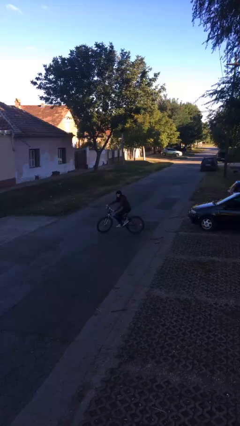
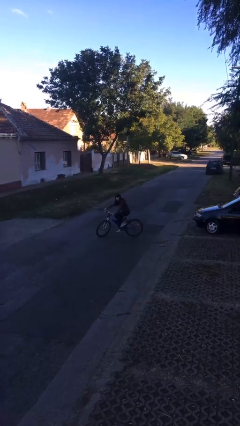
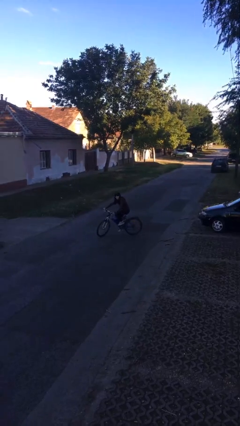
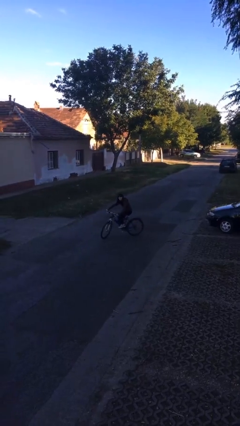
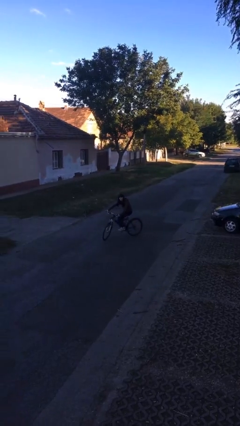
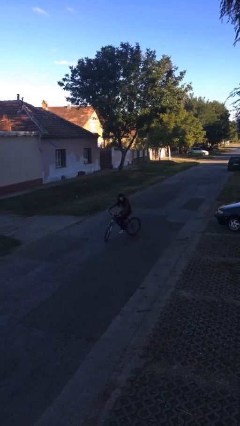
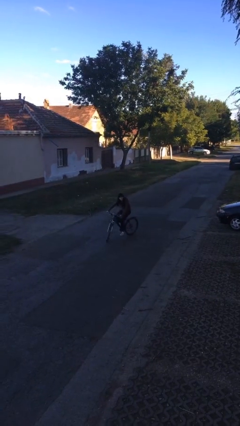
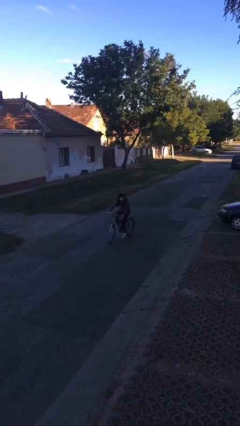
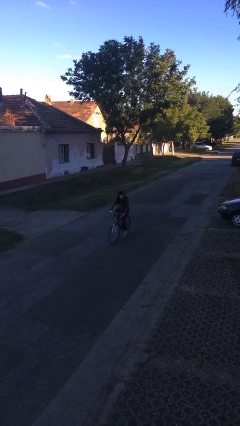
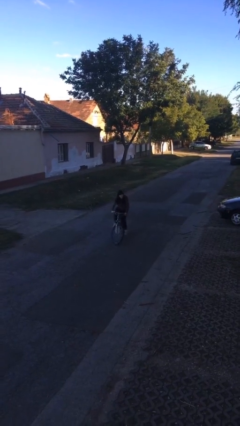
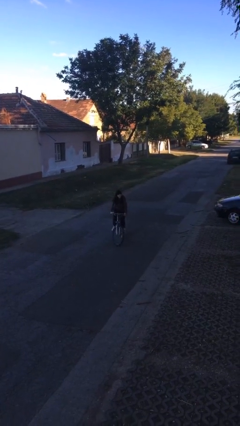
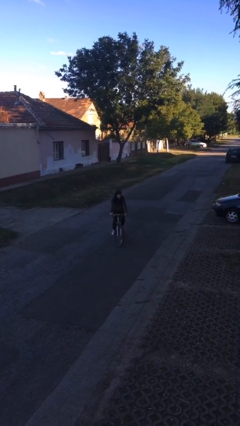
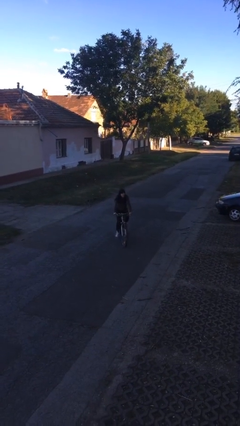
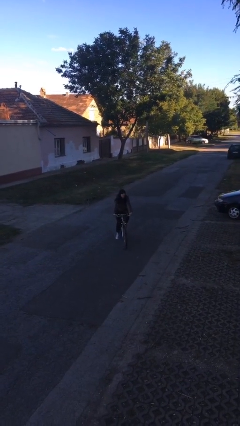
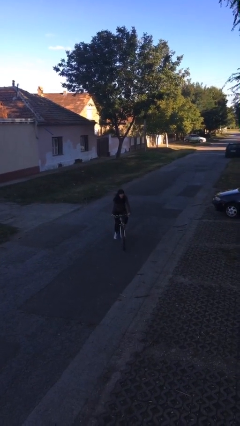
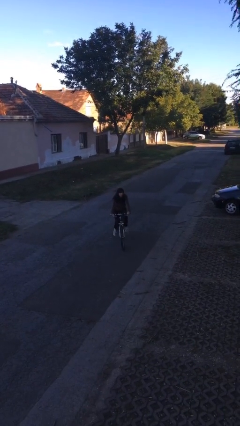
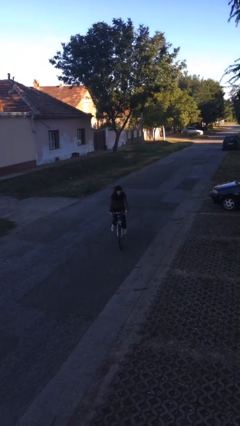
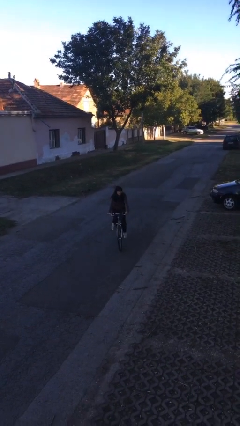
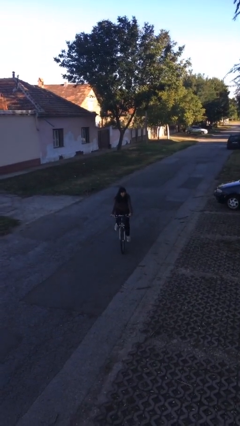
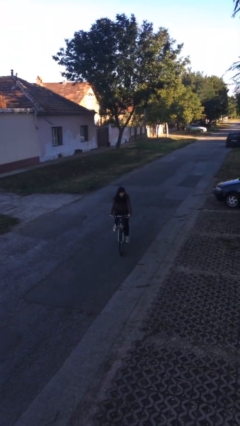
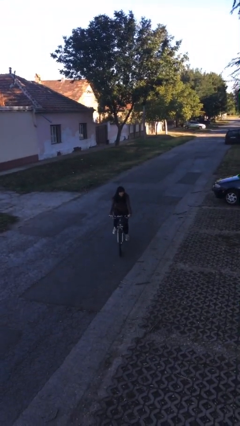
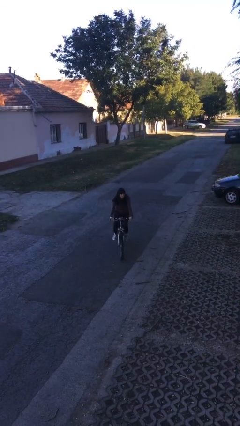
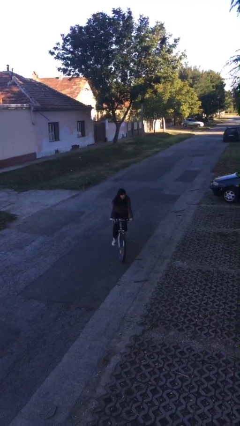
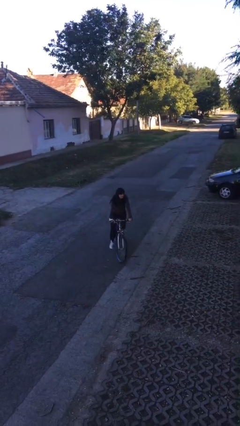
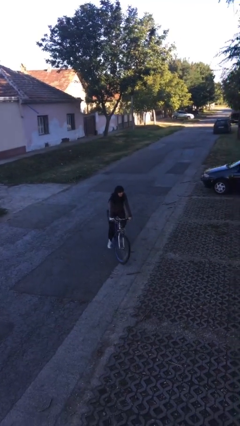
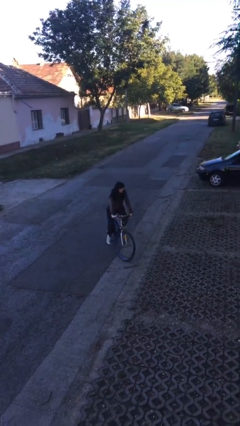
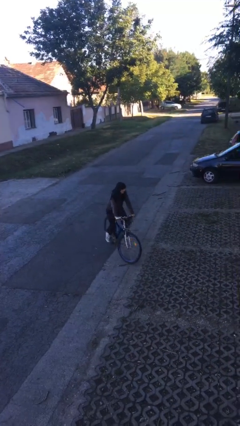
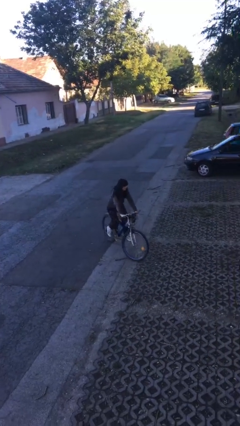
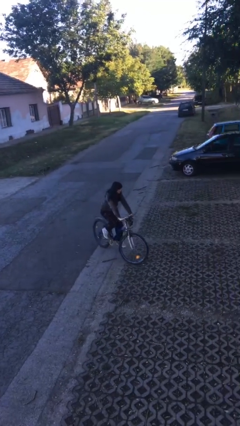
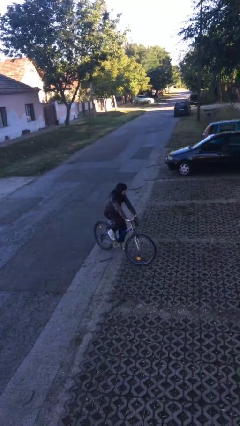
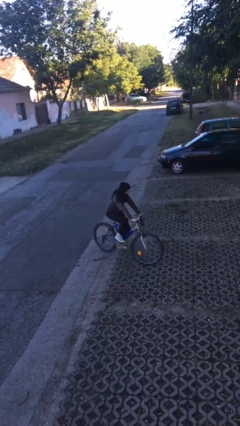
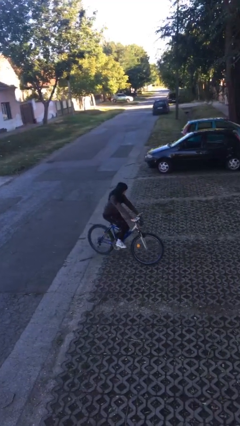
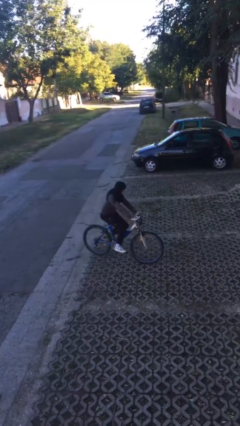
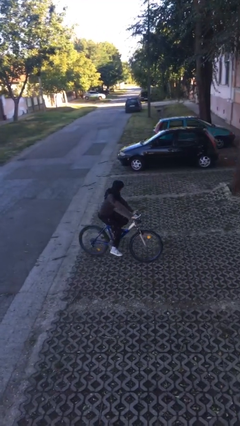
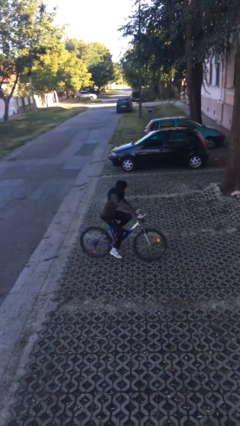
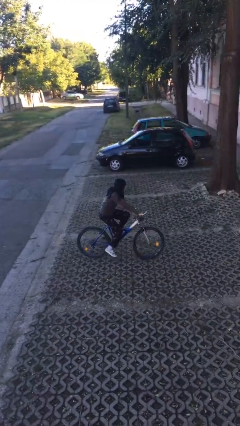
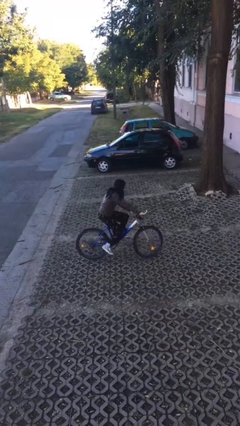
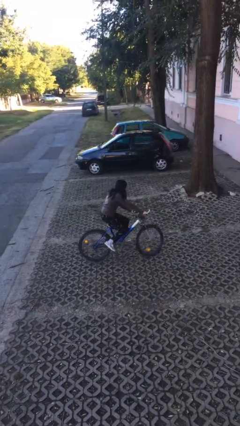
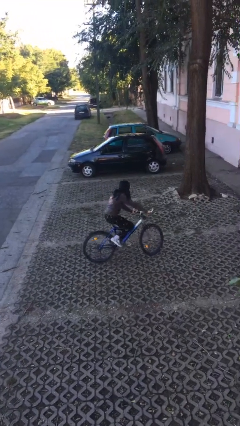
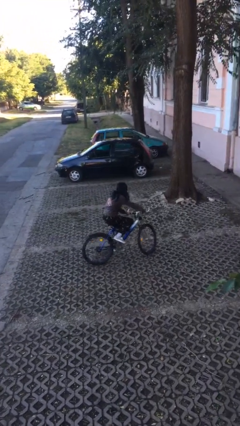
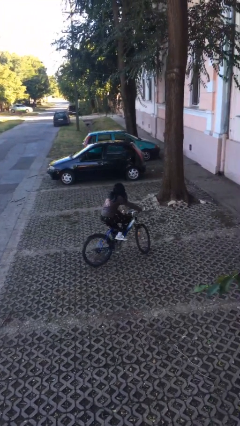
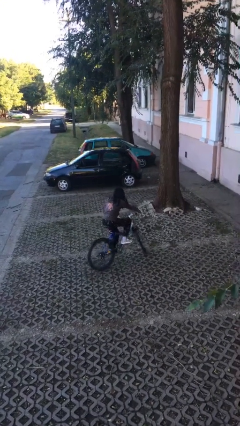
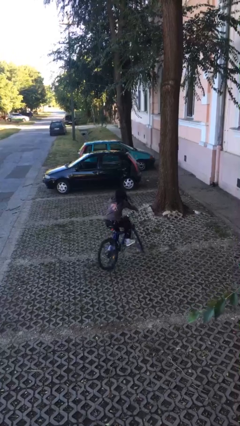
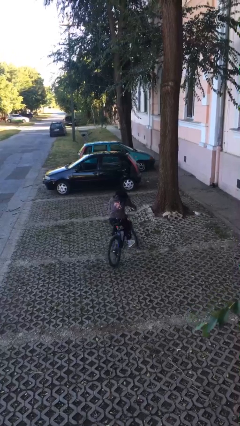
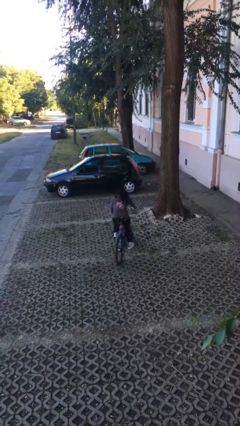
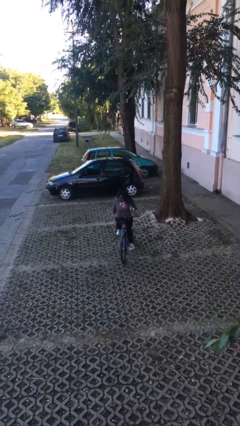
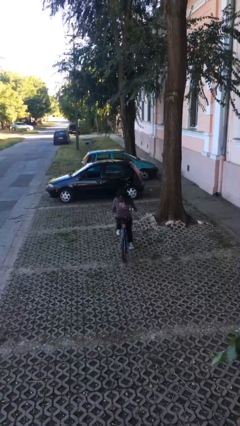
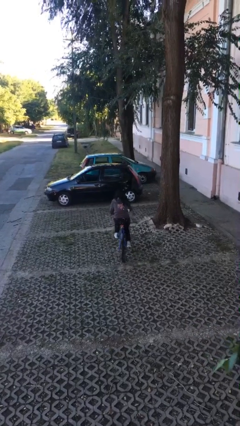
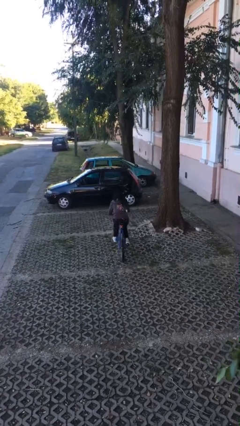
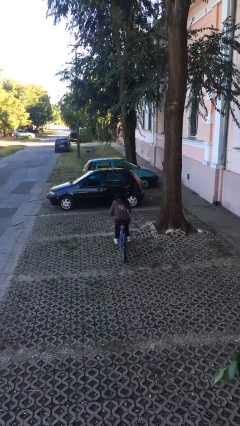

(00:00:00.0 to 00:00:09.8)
person rides bicycle

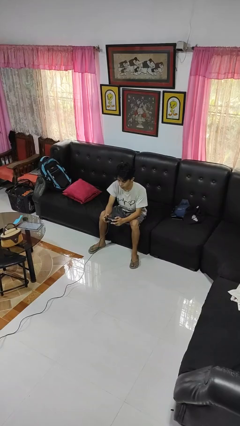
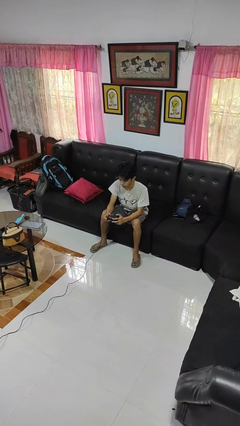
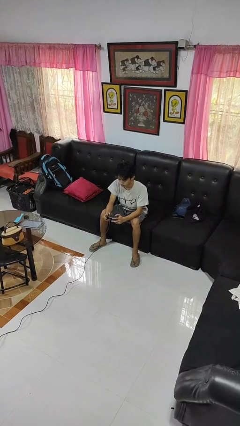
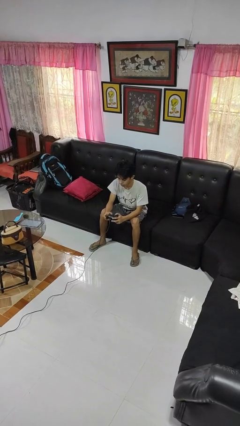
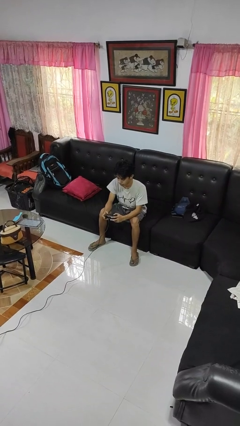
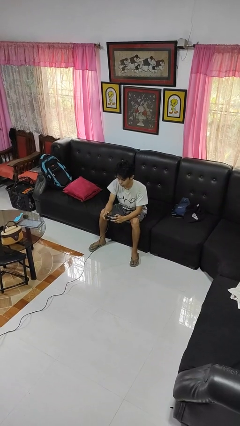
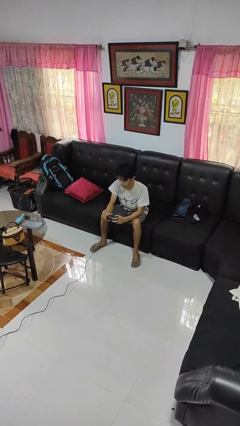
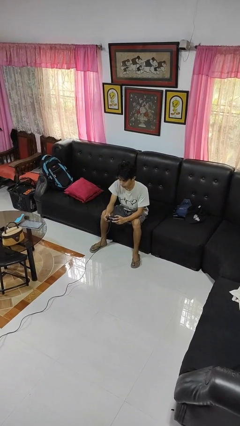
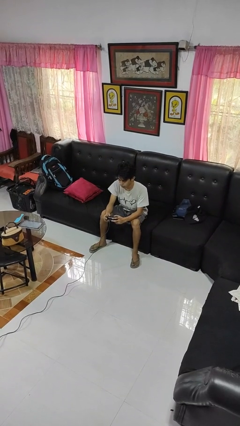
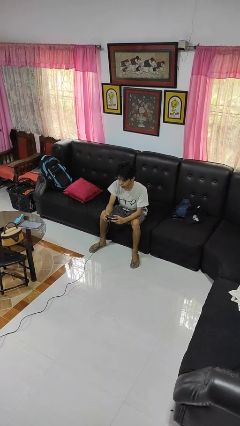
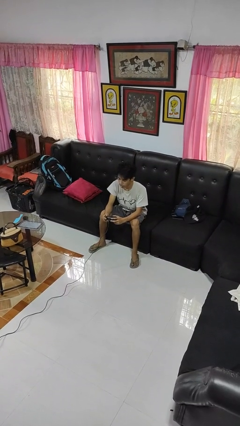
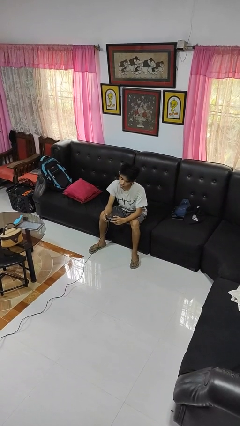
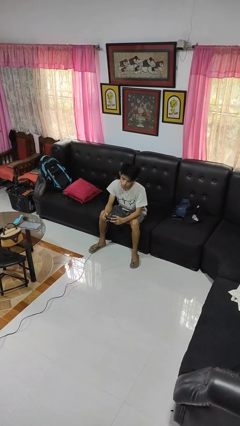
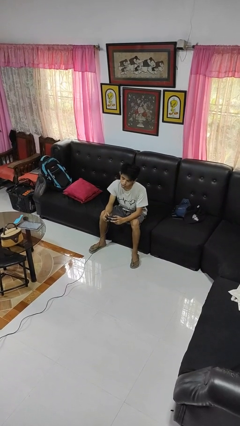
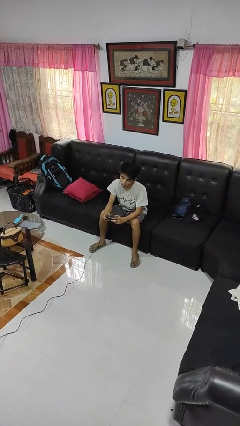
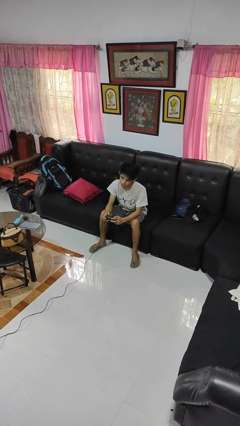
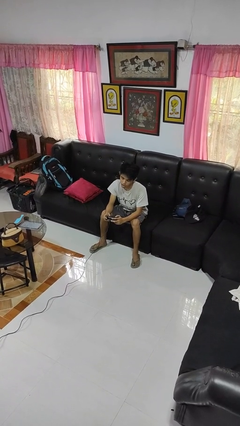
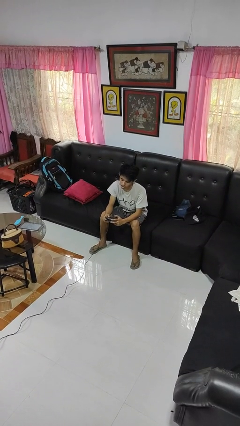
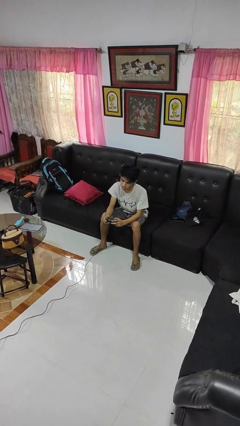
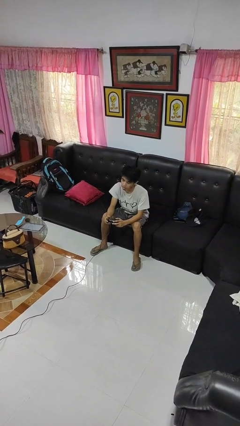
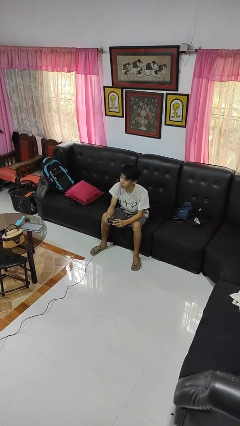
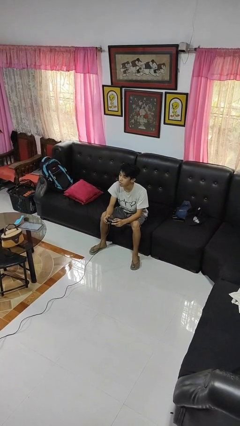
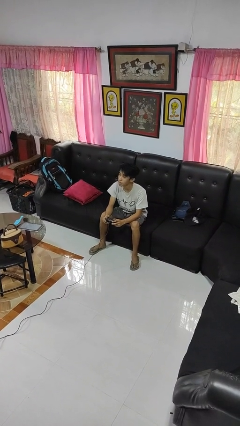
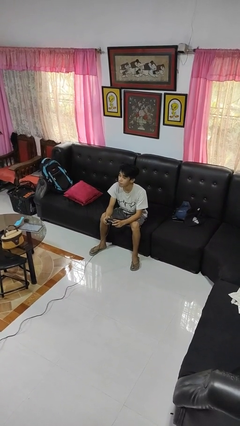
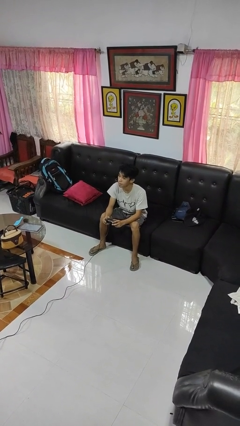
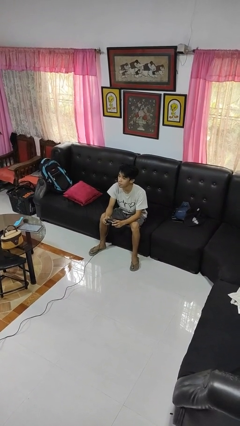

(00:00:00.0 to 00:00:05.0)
person interacts with handheld game

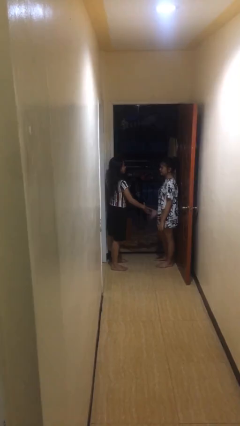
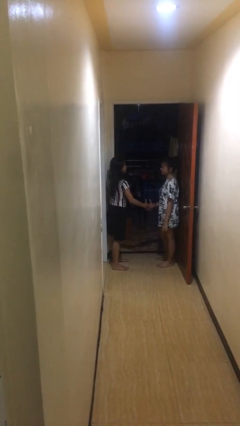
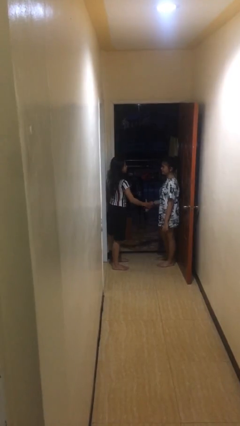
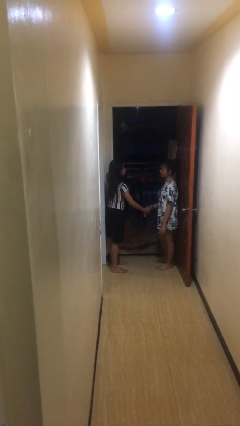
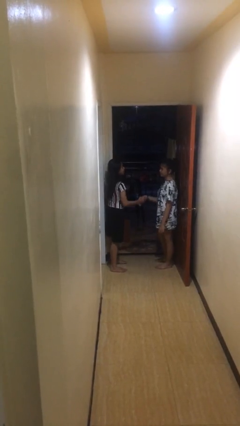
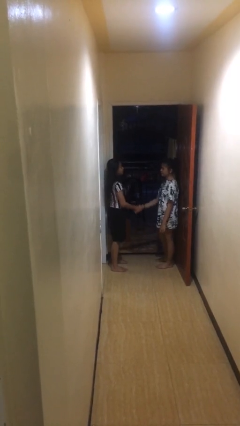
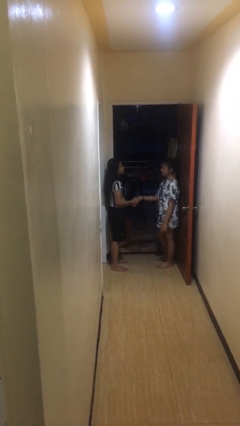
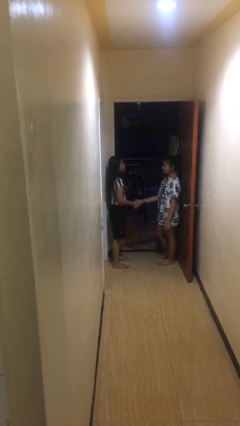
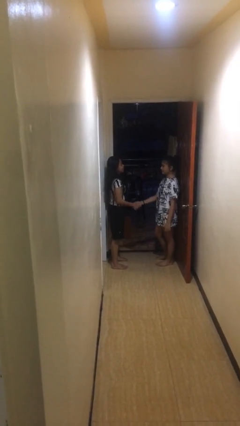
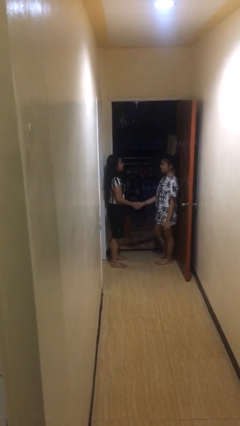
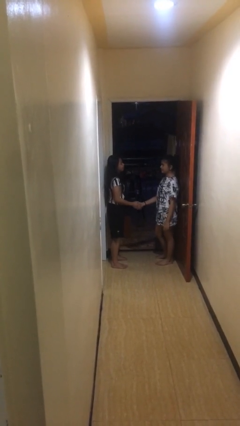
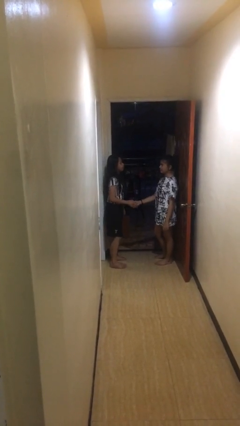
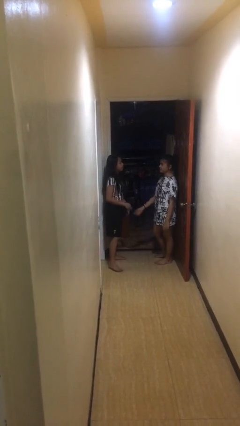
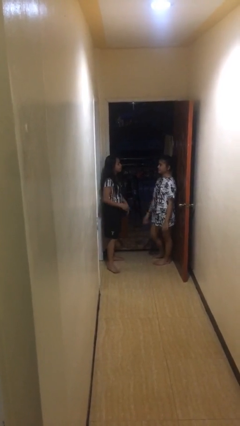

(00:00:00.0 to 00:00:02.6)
person shakes hand
